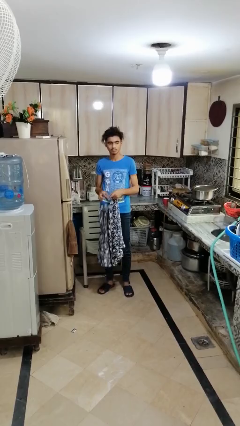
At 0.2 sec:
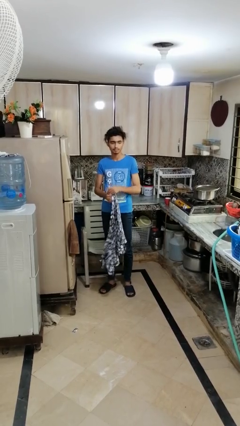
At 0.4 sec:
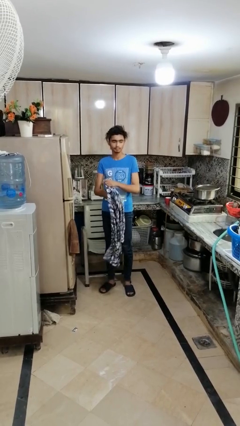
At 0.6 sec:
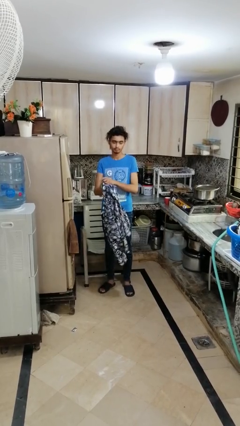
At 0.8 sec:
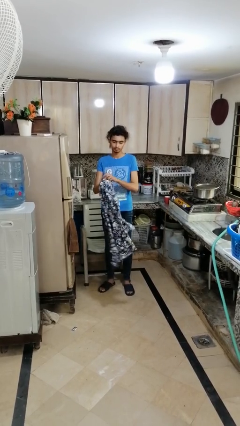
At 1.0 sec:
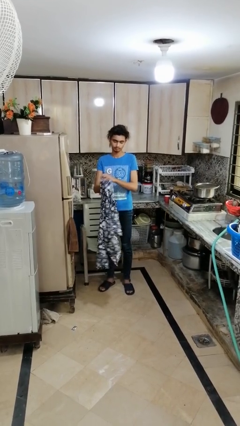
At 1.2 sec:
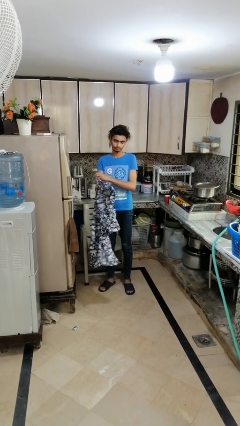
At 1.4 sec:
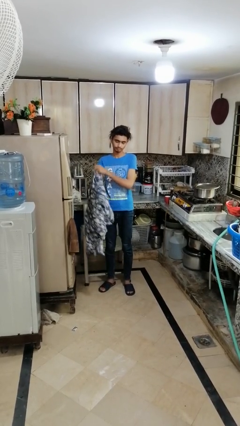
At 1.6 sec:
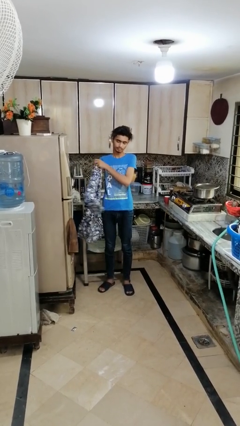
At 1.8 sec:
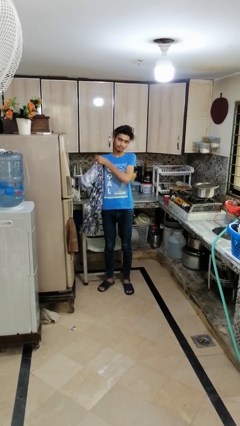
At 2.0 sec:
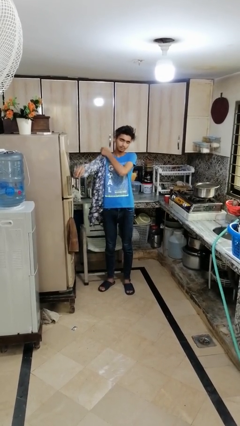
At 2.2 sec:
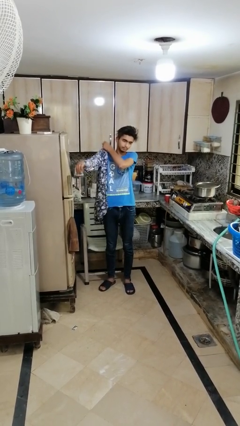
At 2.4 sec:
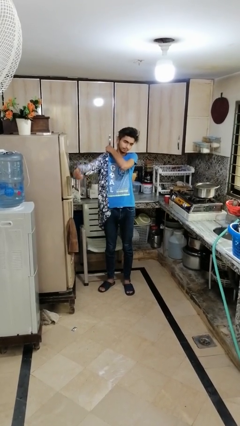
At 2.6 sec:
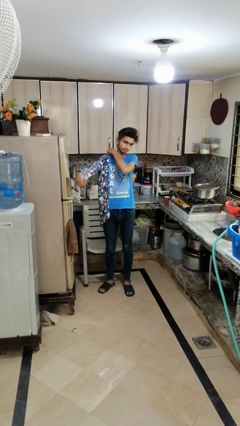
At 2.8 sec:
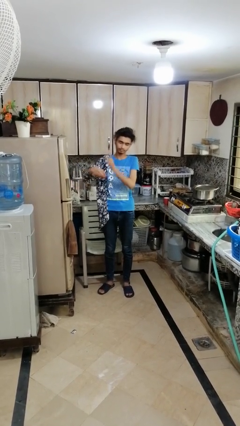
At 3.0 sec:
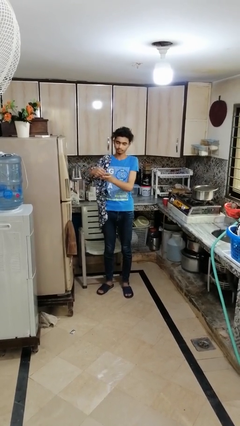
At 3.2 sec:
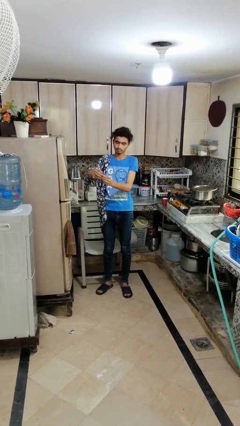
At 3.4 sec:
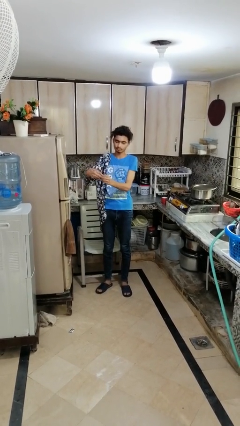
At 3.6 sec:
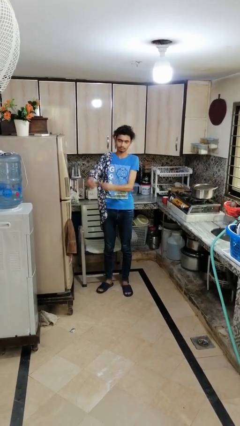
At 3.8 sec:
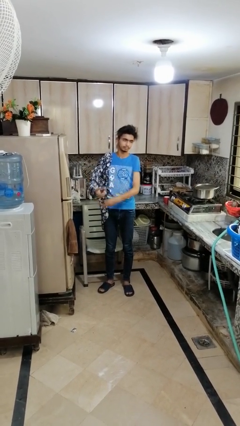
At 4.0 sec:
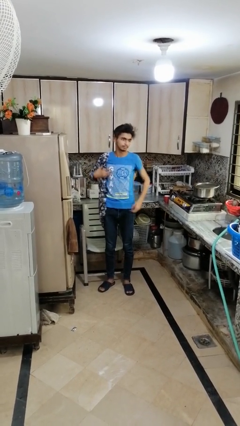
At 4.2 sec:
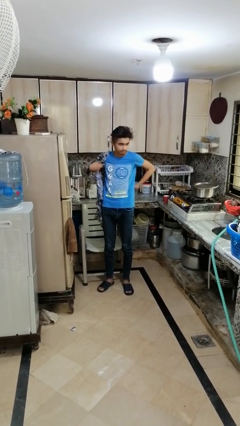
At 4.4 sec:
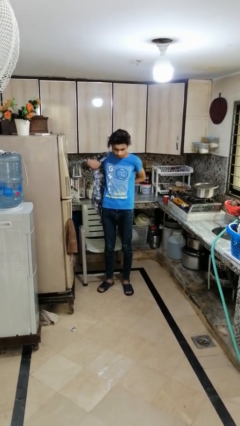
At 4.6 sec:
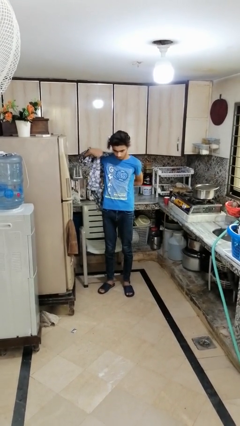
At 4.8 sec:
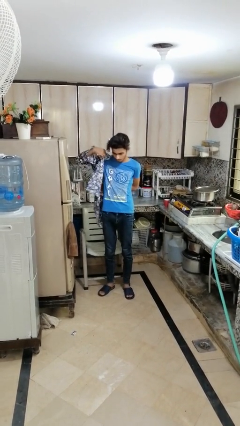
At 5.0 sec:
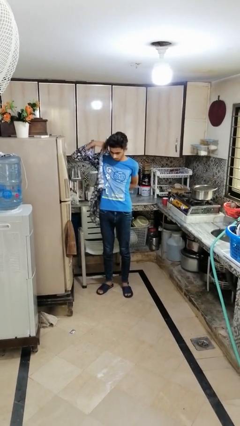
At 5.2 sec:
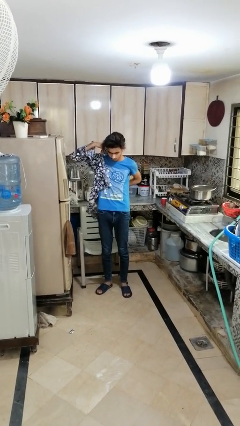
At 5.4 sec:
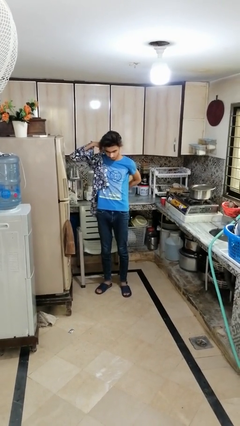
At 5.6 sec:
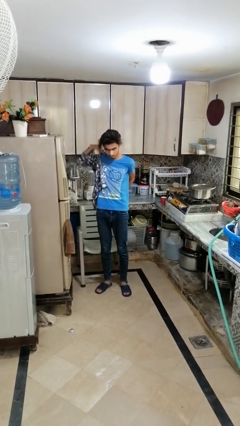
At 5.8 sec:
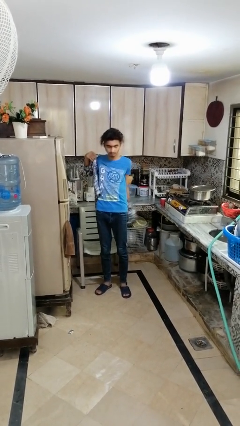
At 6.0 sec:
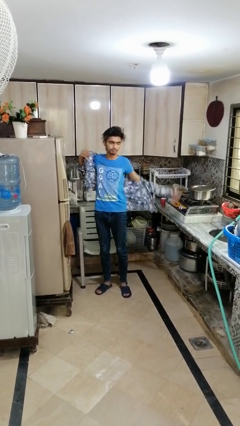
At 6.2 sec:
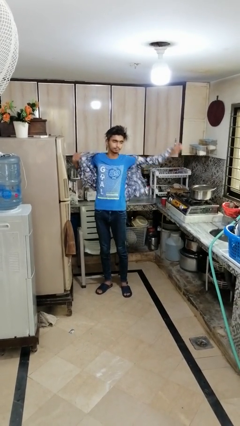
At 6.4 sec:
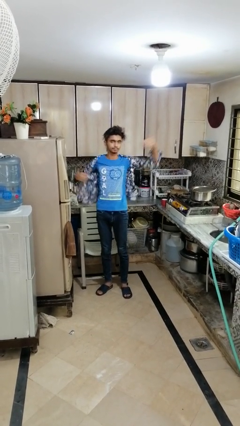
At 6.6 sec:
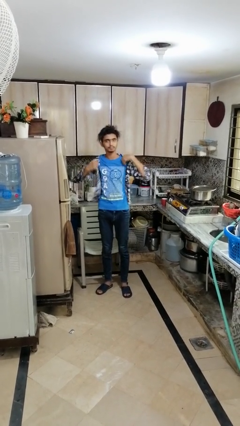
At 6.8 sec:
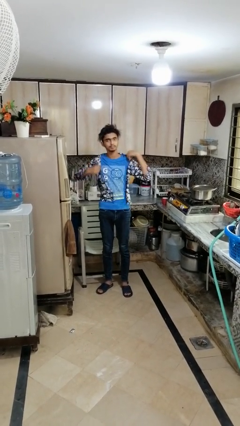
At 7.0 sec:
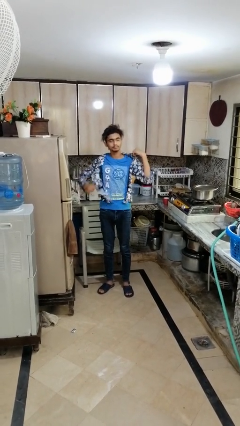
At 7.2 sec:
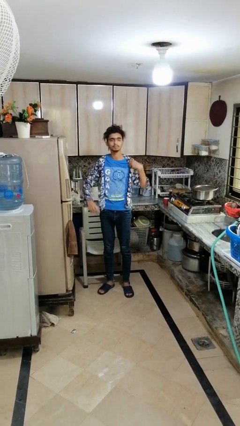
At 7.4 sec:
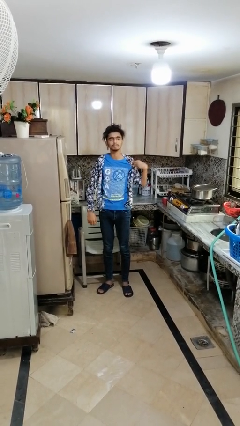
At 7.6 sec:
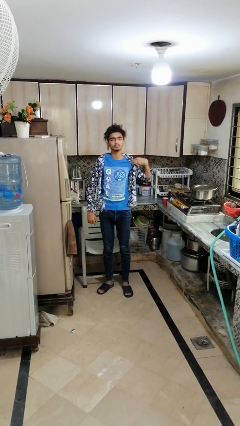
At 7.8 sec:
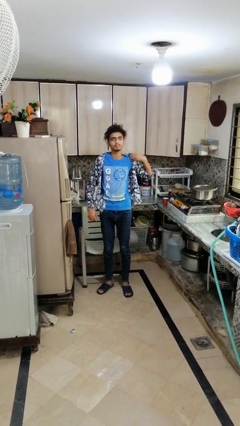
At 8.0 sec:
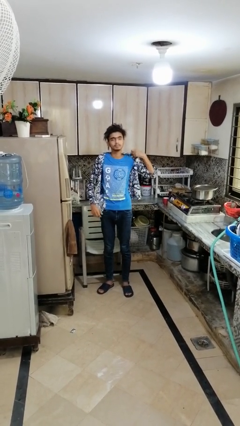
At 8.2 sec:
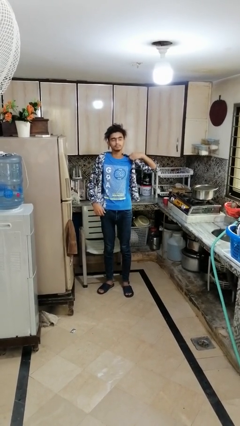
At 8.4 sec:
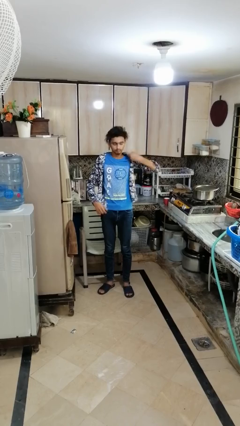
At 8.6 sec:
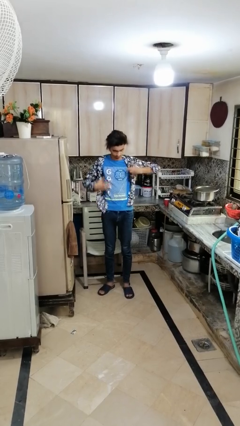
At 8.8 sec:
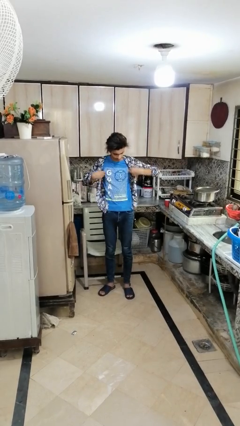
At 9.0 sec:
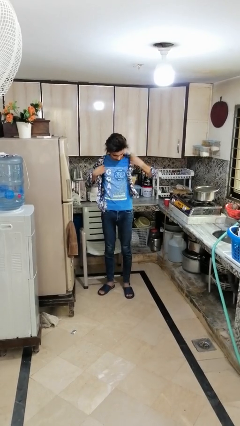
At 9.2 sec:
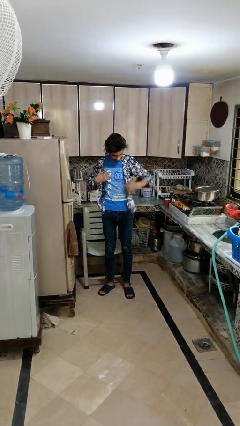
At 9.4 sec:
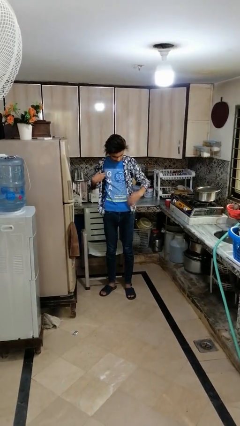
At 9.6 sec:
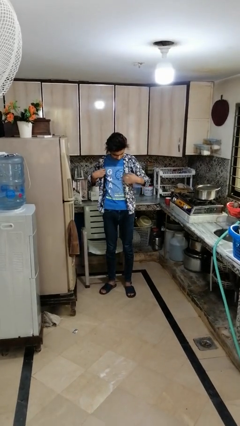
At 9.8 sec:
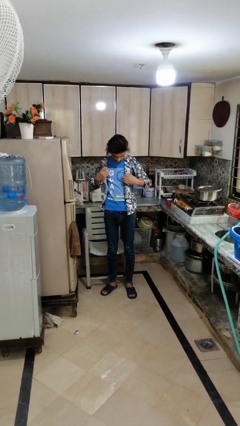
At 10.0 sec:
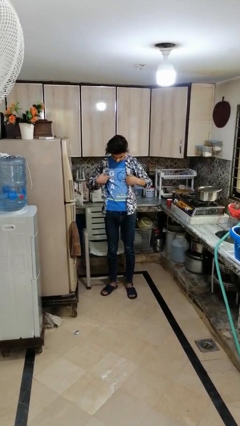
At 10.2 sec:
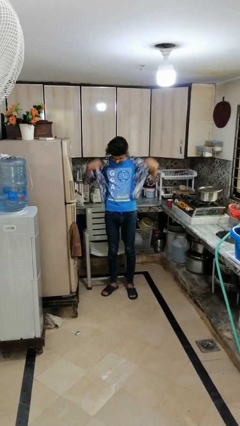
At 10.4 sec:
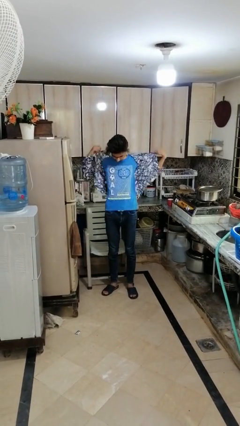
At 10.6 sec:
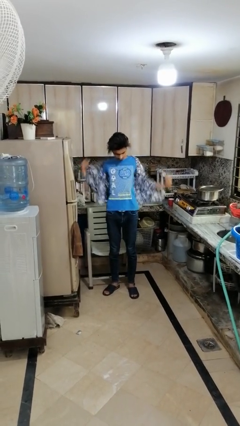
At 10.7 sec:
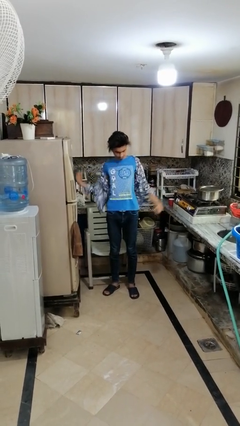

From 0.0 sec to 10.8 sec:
person puts on shirt

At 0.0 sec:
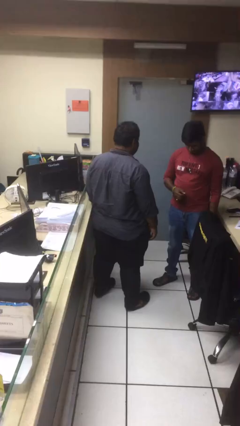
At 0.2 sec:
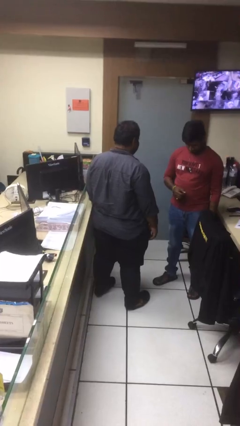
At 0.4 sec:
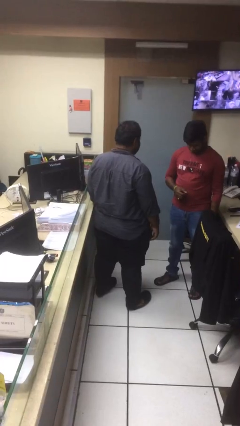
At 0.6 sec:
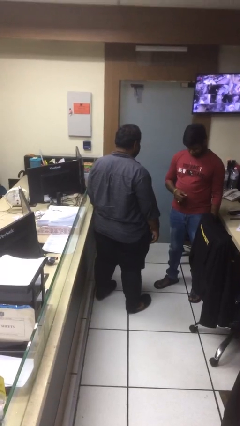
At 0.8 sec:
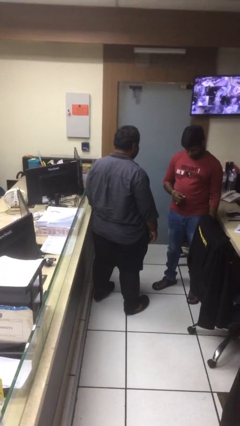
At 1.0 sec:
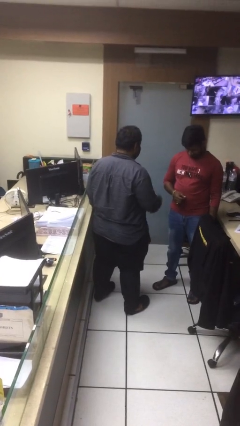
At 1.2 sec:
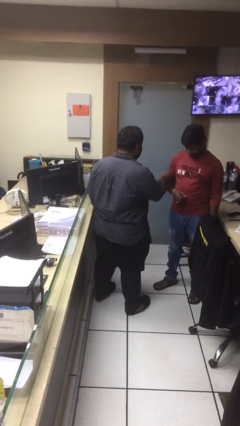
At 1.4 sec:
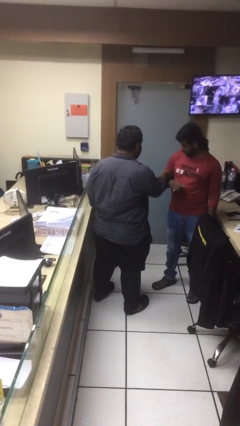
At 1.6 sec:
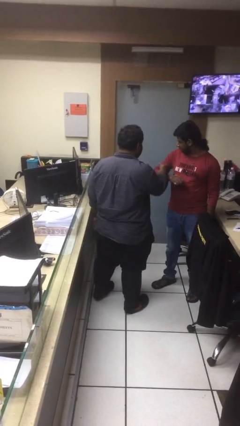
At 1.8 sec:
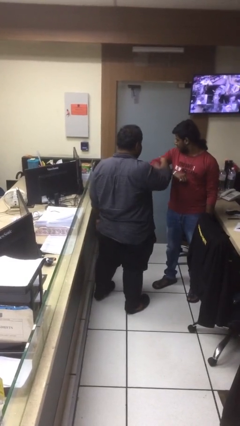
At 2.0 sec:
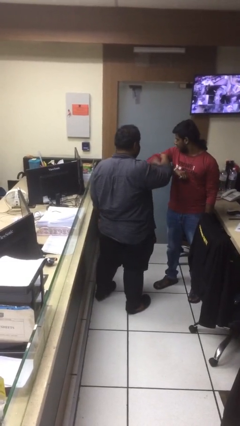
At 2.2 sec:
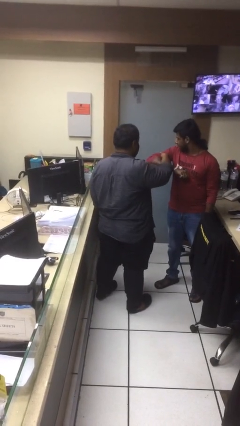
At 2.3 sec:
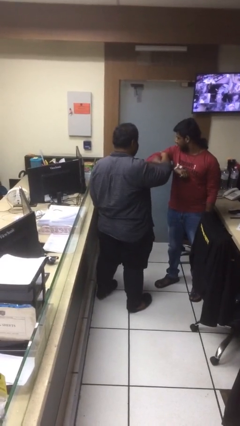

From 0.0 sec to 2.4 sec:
person grabs person by bicep

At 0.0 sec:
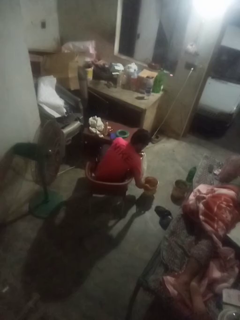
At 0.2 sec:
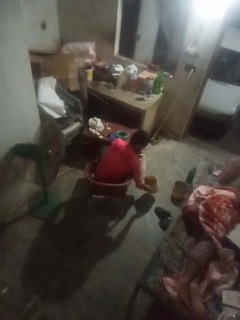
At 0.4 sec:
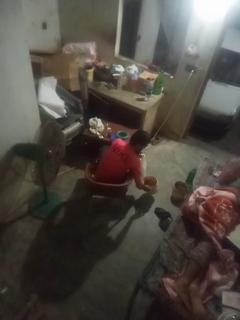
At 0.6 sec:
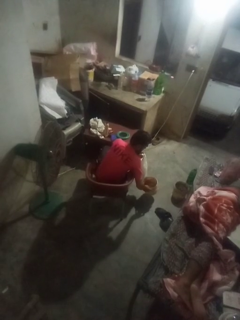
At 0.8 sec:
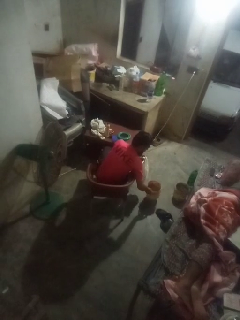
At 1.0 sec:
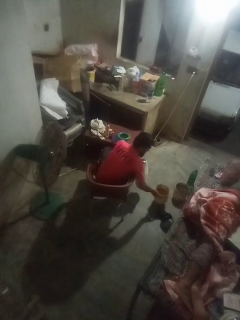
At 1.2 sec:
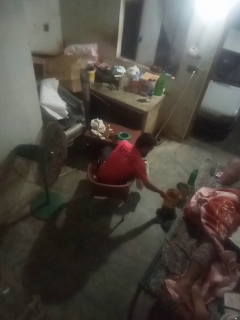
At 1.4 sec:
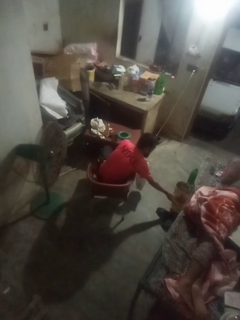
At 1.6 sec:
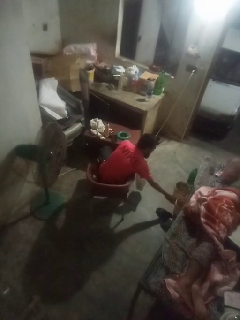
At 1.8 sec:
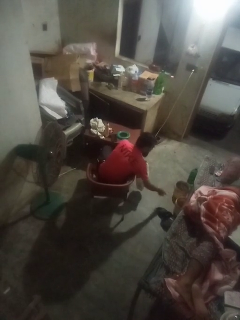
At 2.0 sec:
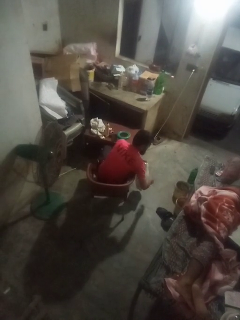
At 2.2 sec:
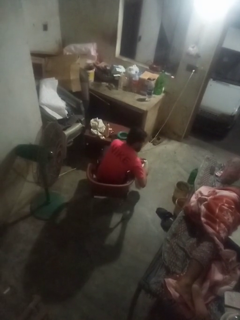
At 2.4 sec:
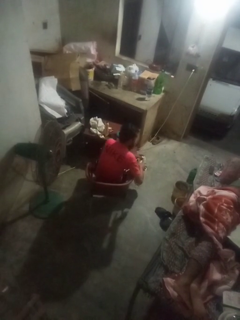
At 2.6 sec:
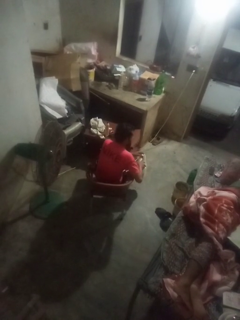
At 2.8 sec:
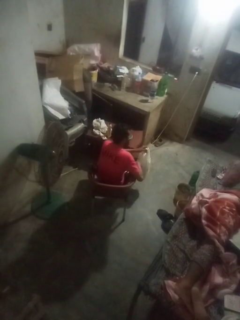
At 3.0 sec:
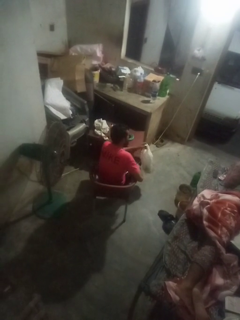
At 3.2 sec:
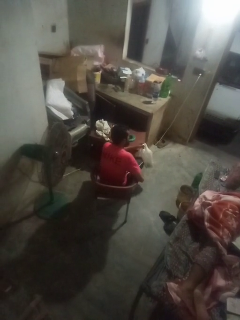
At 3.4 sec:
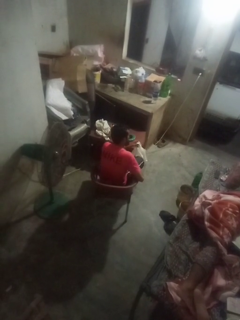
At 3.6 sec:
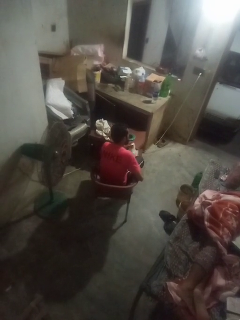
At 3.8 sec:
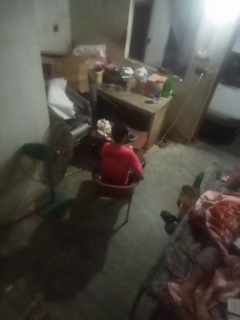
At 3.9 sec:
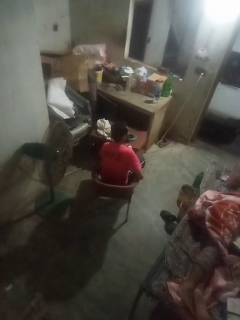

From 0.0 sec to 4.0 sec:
person inserts trashbag into trashcan

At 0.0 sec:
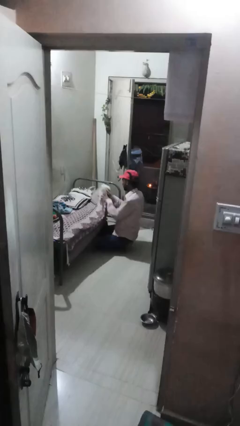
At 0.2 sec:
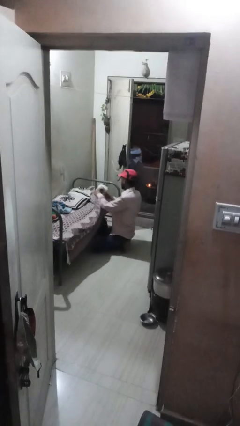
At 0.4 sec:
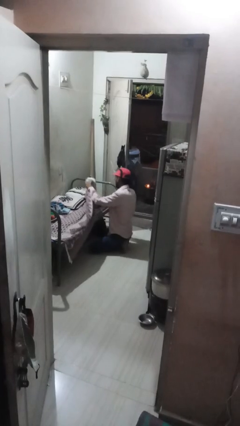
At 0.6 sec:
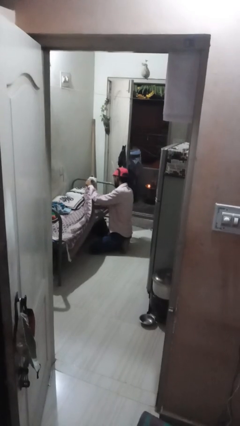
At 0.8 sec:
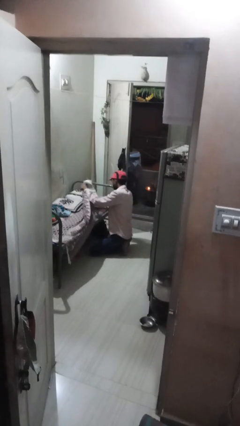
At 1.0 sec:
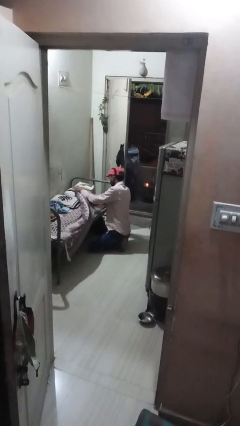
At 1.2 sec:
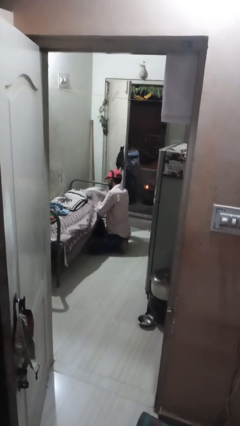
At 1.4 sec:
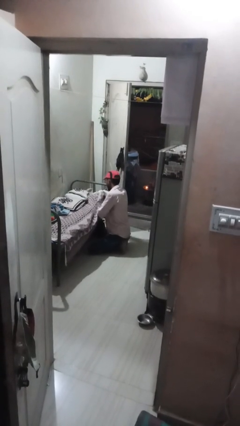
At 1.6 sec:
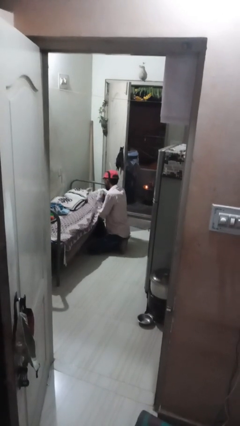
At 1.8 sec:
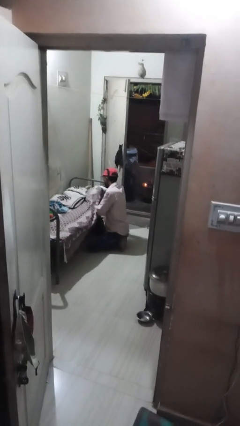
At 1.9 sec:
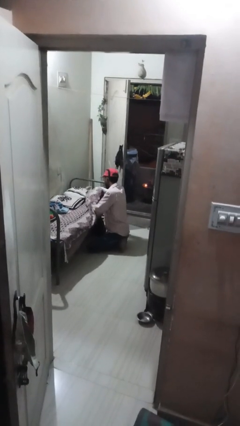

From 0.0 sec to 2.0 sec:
person searches under couch
